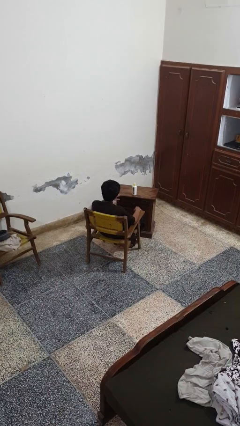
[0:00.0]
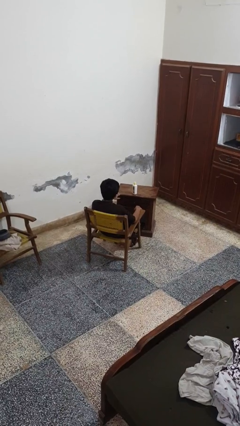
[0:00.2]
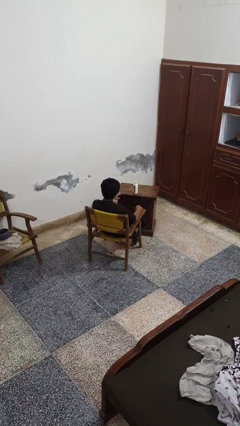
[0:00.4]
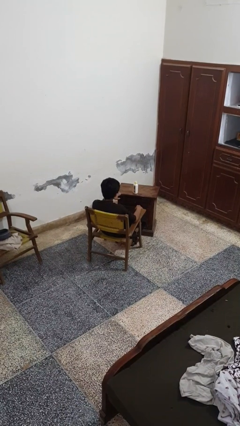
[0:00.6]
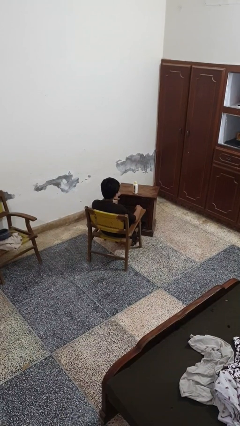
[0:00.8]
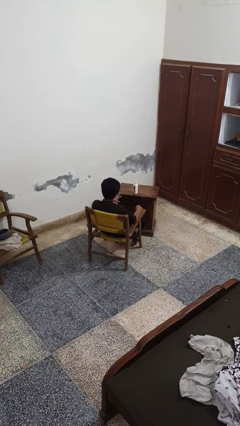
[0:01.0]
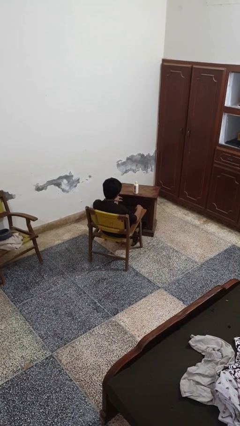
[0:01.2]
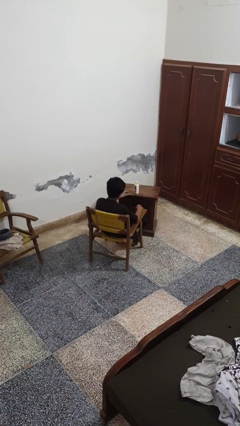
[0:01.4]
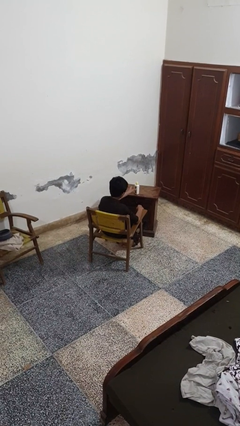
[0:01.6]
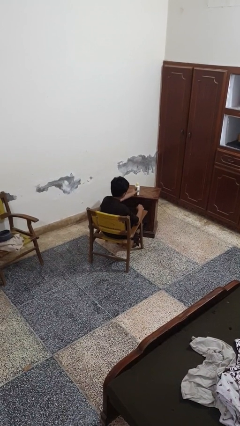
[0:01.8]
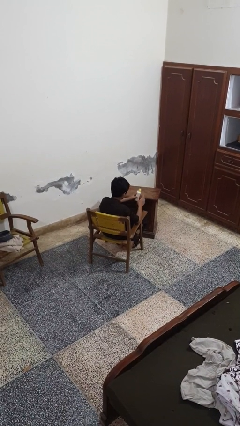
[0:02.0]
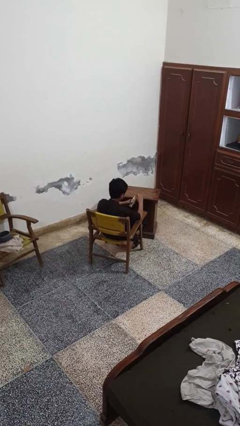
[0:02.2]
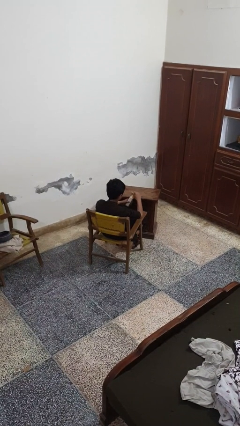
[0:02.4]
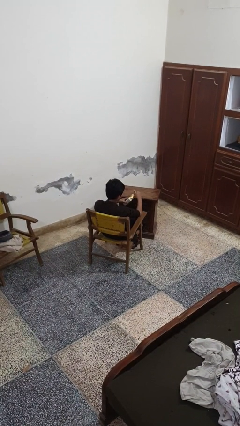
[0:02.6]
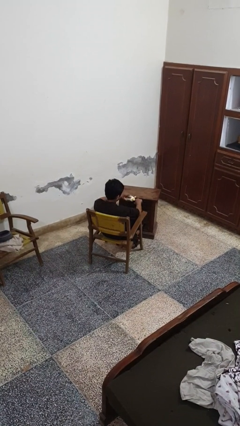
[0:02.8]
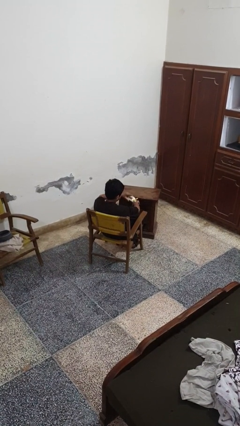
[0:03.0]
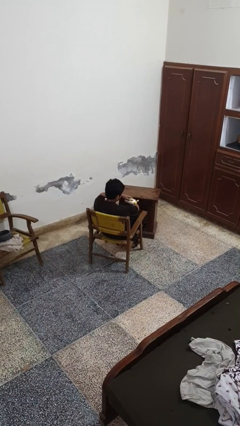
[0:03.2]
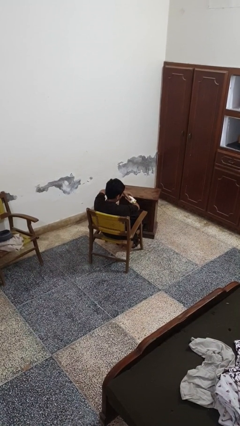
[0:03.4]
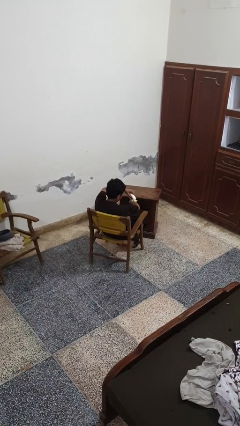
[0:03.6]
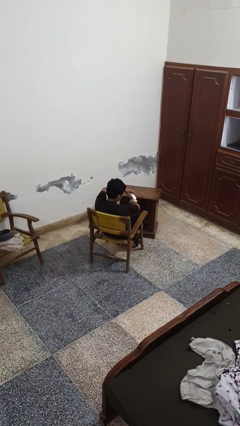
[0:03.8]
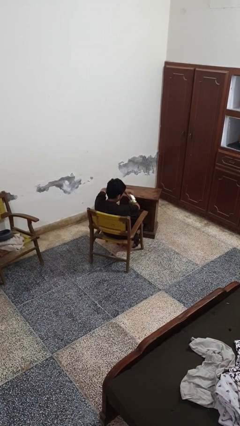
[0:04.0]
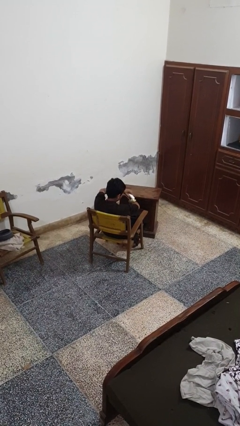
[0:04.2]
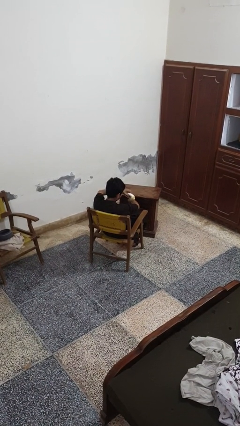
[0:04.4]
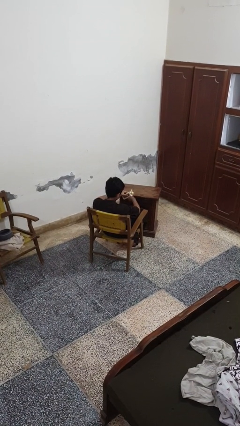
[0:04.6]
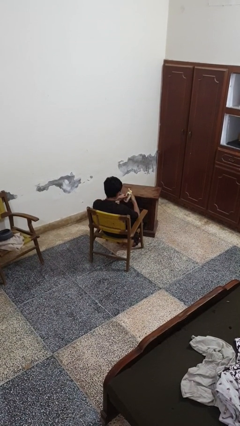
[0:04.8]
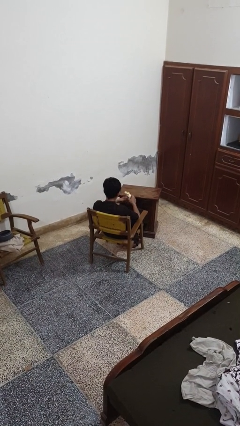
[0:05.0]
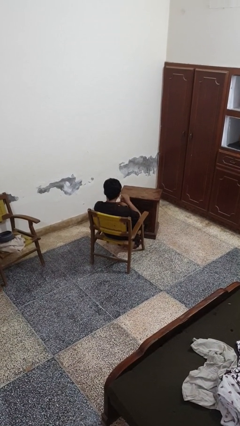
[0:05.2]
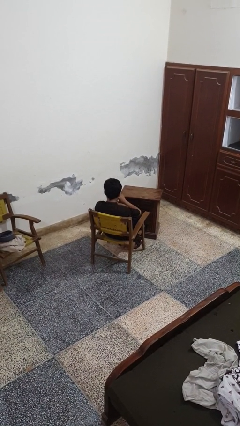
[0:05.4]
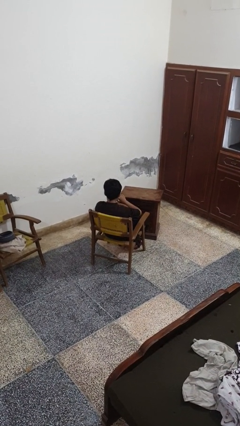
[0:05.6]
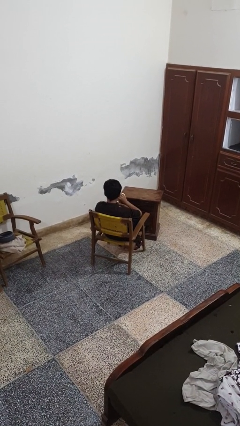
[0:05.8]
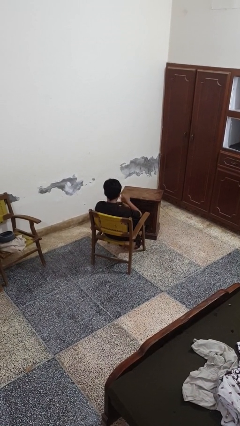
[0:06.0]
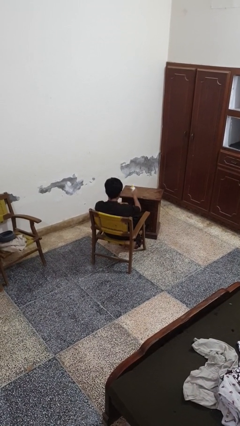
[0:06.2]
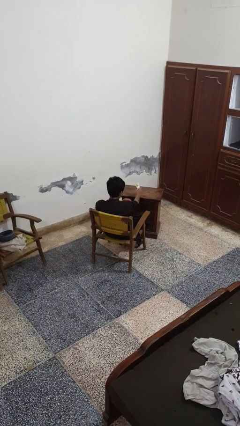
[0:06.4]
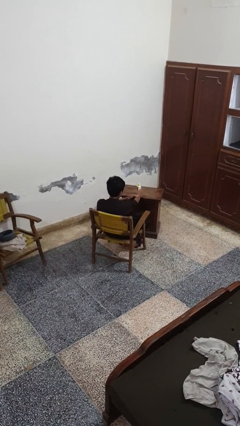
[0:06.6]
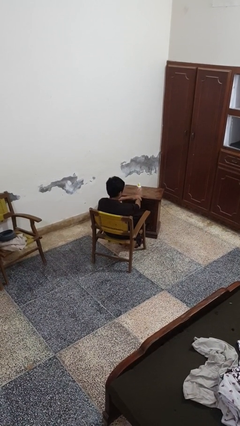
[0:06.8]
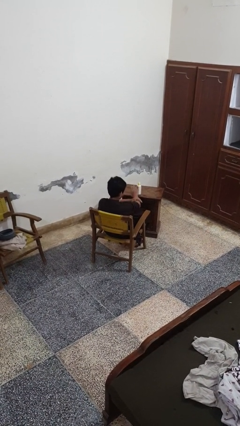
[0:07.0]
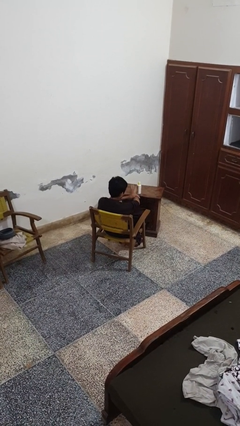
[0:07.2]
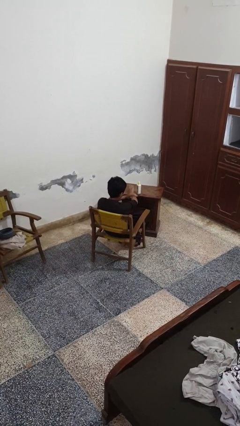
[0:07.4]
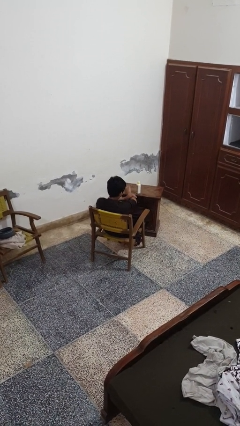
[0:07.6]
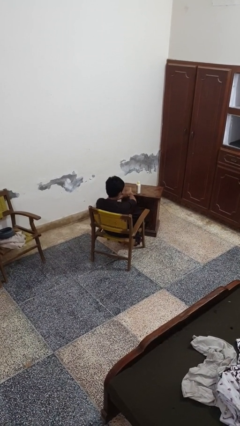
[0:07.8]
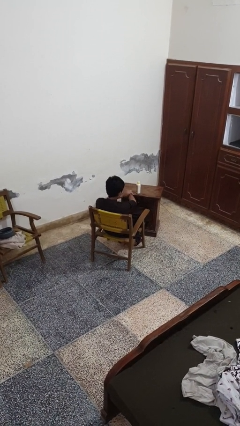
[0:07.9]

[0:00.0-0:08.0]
person applies sunscreen

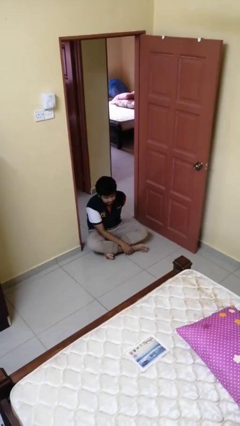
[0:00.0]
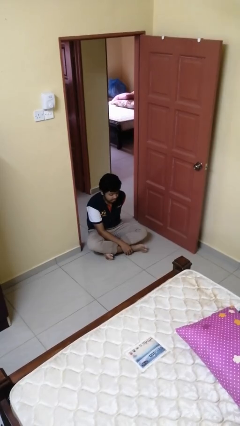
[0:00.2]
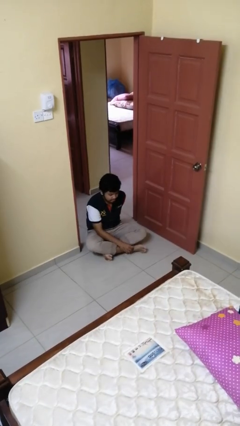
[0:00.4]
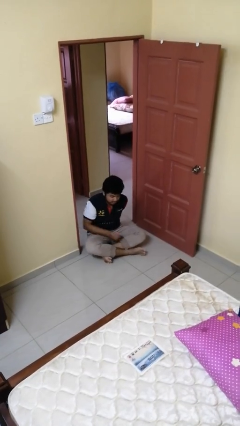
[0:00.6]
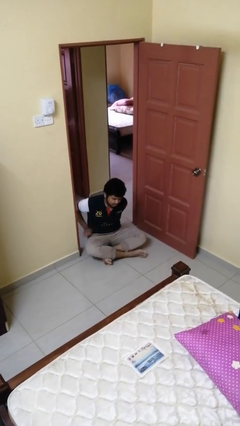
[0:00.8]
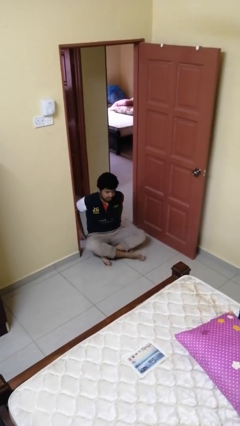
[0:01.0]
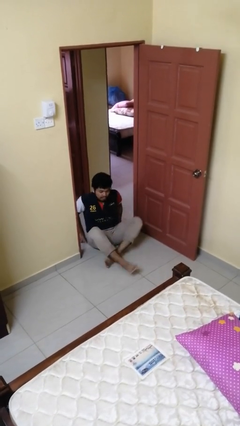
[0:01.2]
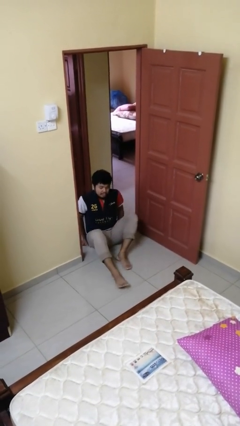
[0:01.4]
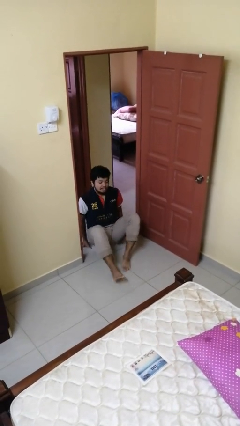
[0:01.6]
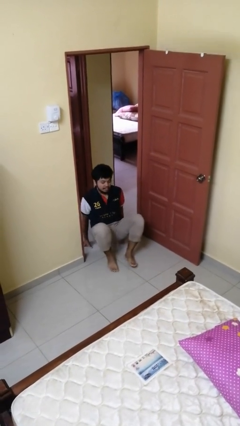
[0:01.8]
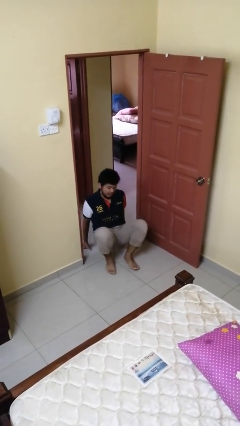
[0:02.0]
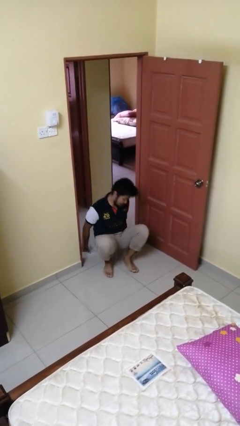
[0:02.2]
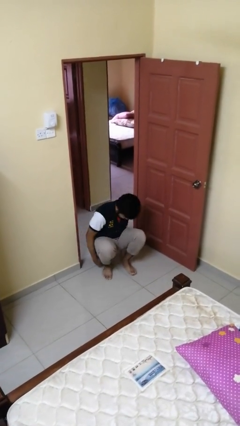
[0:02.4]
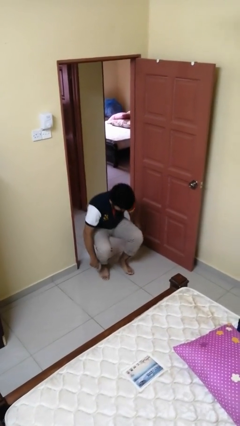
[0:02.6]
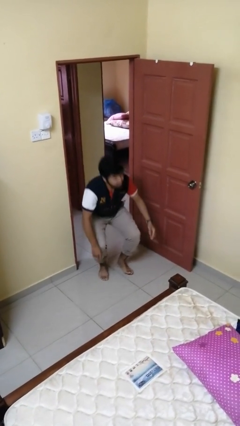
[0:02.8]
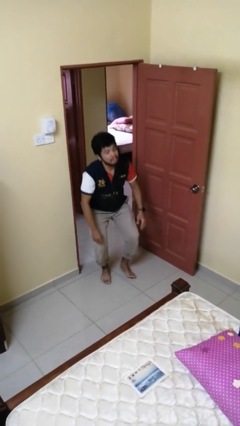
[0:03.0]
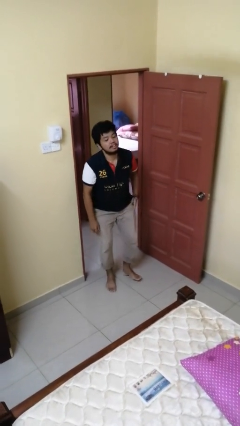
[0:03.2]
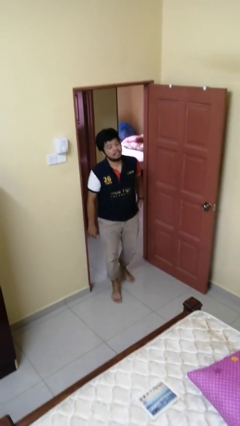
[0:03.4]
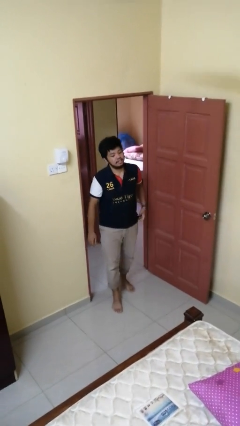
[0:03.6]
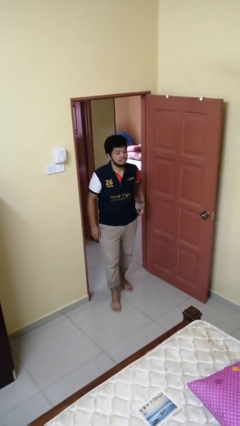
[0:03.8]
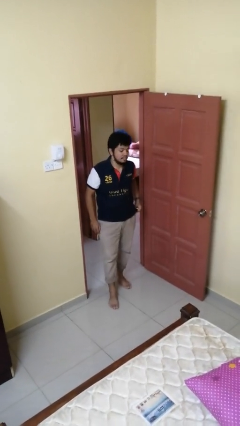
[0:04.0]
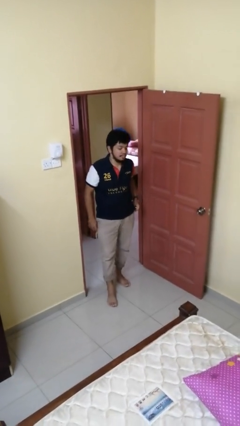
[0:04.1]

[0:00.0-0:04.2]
person stands up from floor

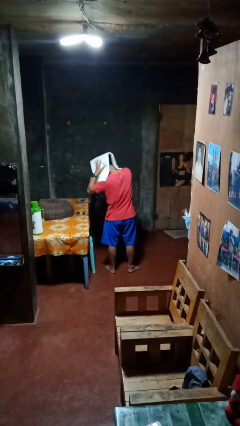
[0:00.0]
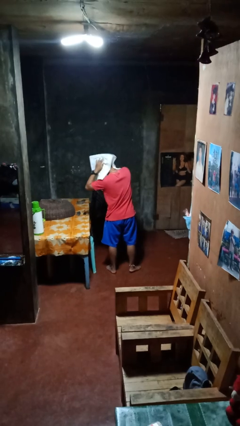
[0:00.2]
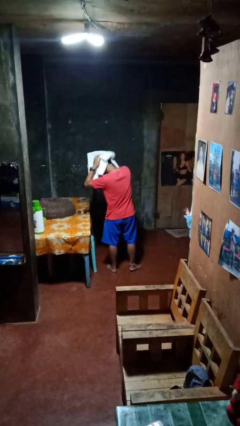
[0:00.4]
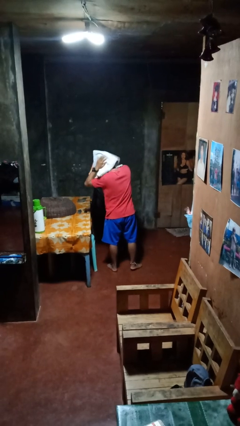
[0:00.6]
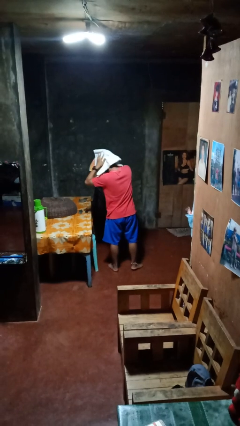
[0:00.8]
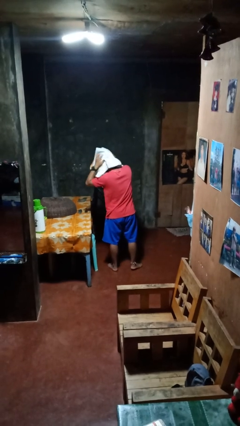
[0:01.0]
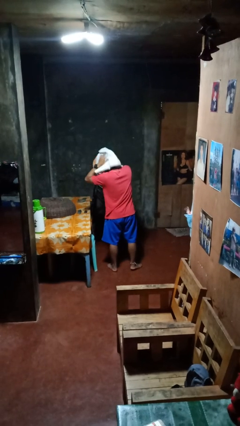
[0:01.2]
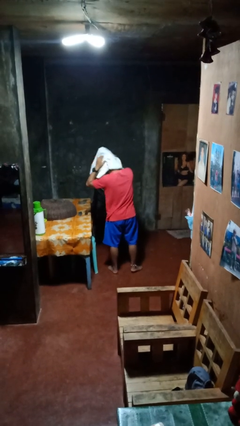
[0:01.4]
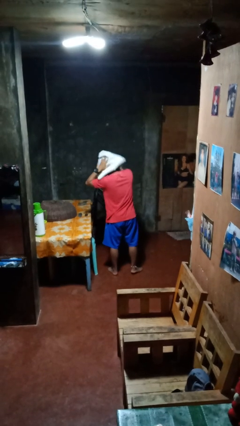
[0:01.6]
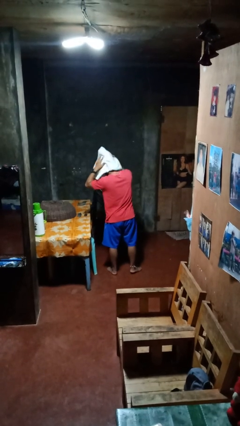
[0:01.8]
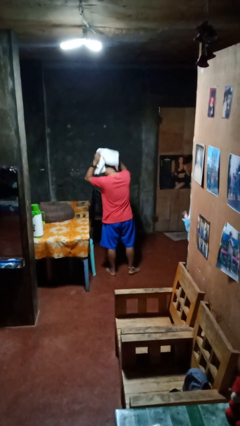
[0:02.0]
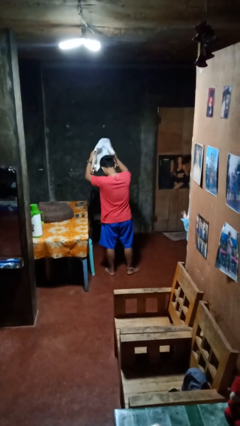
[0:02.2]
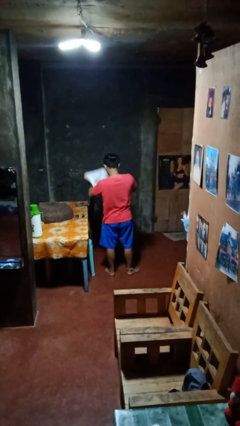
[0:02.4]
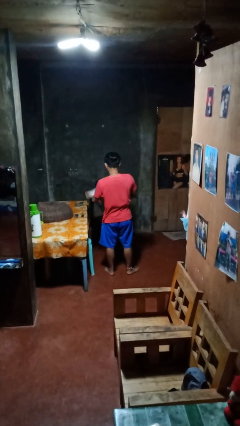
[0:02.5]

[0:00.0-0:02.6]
person dries hair with towel

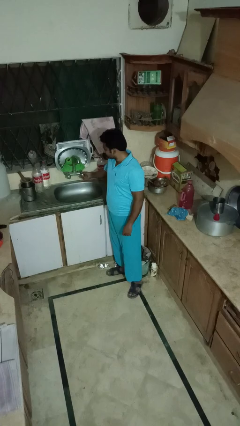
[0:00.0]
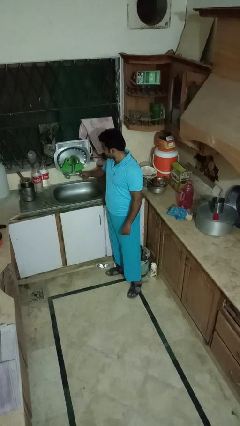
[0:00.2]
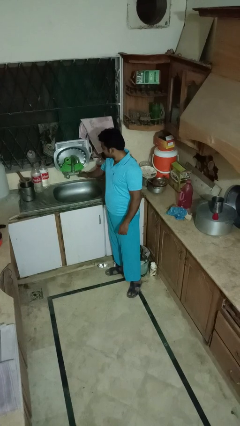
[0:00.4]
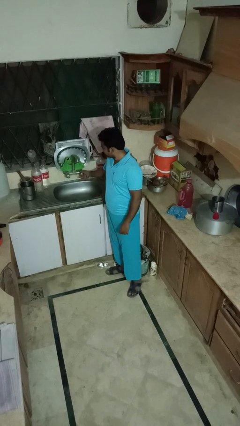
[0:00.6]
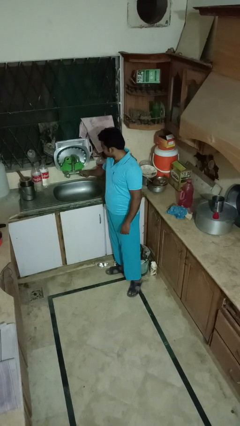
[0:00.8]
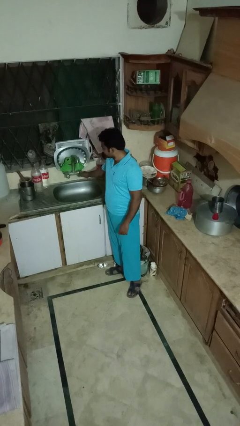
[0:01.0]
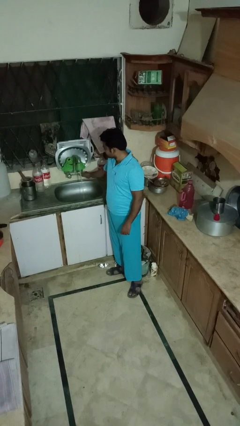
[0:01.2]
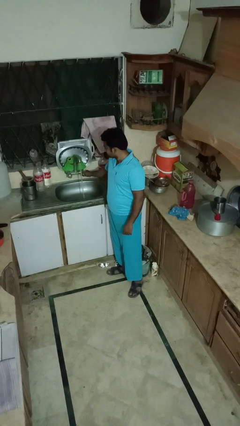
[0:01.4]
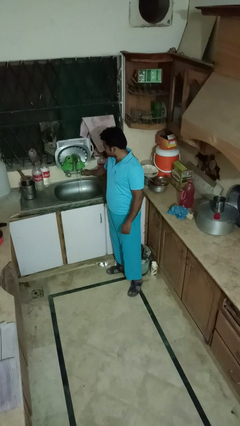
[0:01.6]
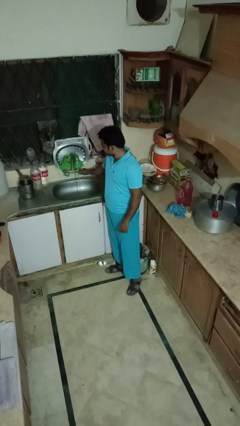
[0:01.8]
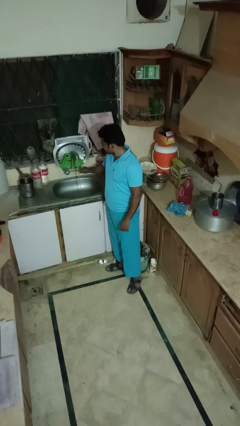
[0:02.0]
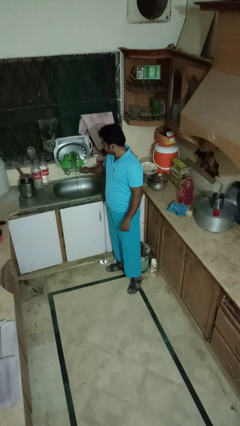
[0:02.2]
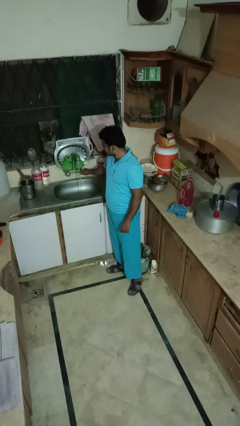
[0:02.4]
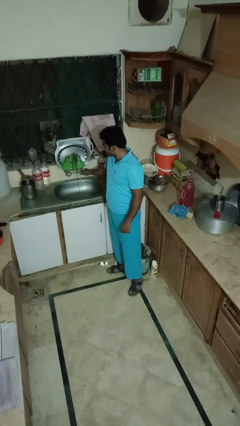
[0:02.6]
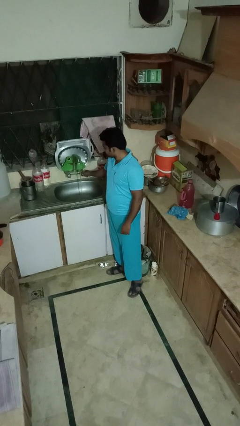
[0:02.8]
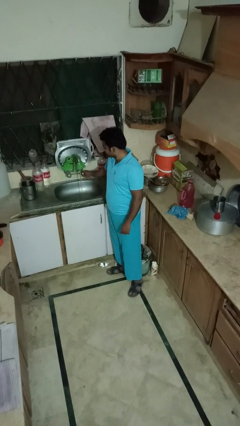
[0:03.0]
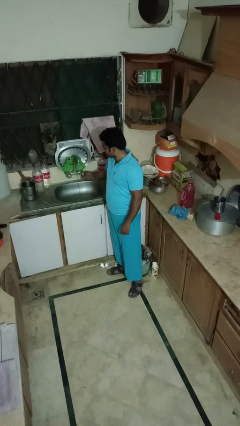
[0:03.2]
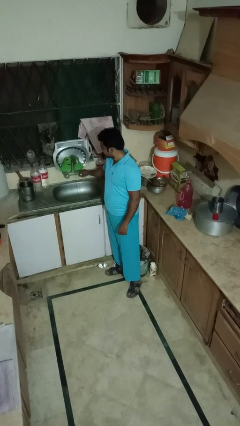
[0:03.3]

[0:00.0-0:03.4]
person turns on faucet
